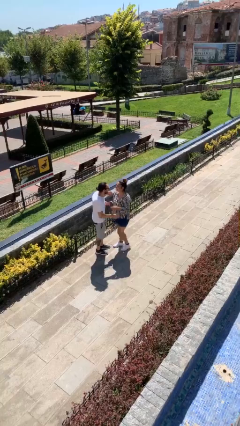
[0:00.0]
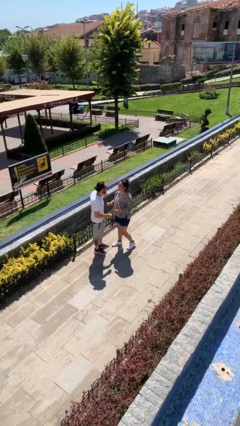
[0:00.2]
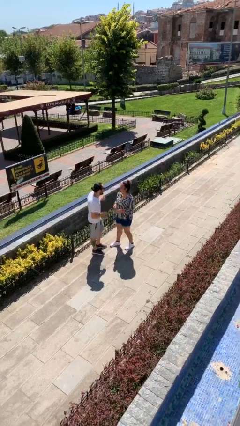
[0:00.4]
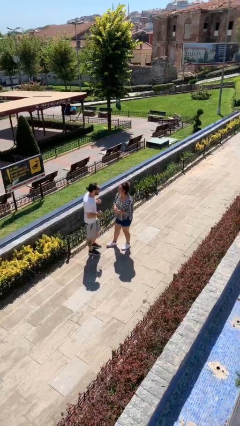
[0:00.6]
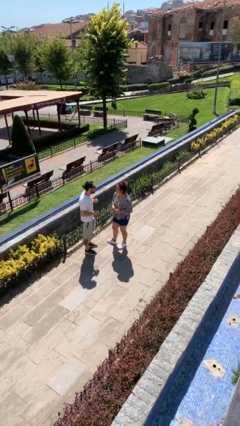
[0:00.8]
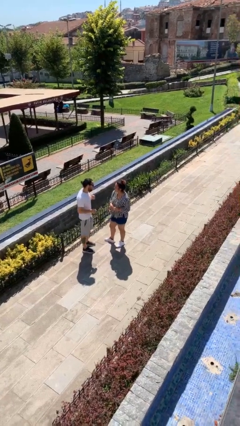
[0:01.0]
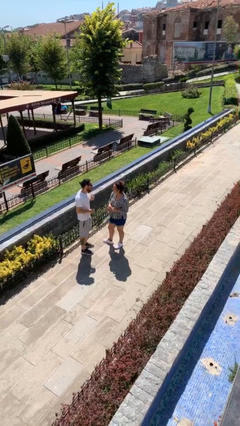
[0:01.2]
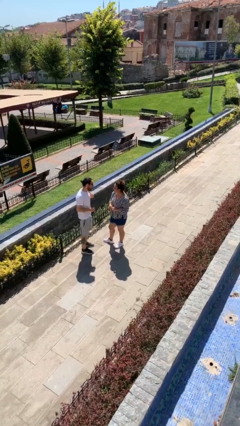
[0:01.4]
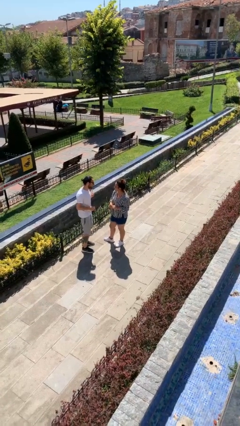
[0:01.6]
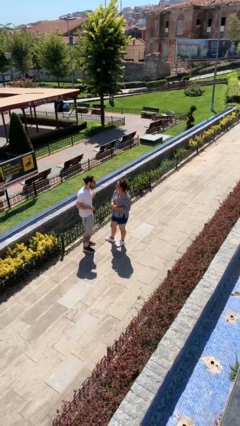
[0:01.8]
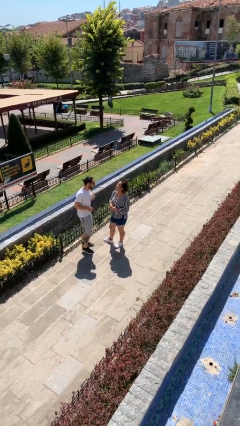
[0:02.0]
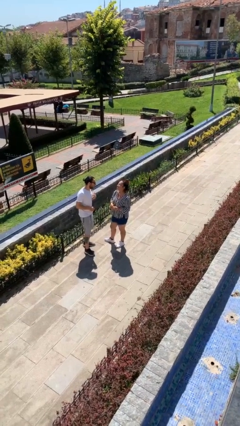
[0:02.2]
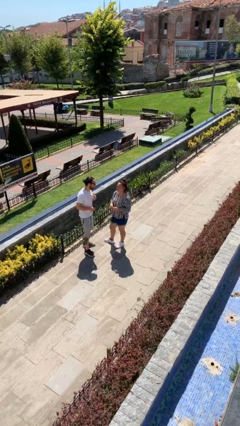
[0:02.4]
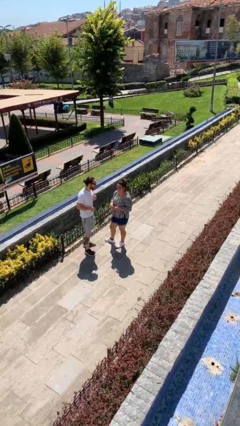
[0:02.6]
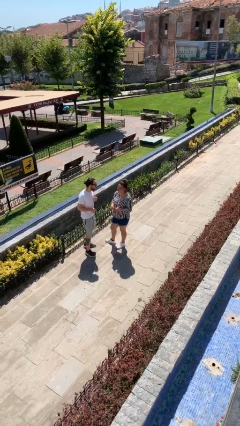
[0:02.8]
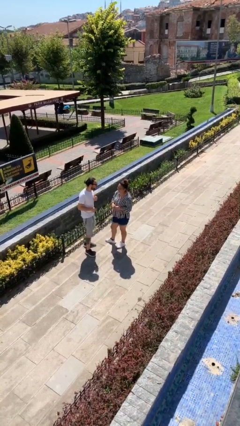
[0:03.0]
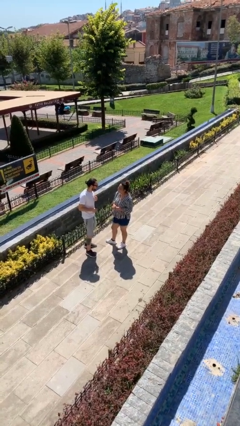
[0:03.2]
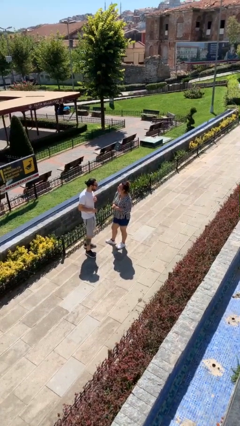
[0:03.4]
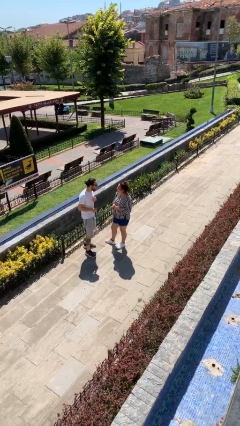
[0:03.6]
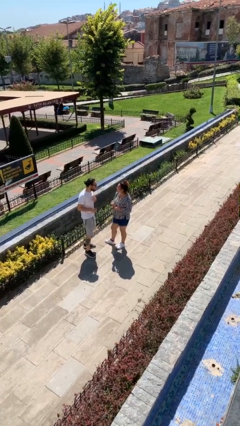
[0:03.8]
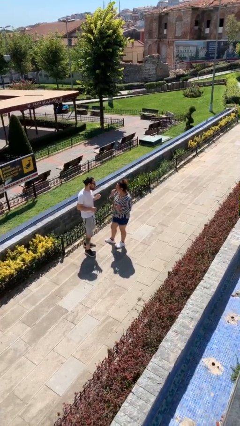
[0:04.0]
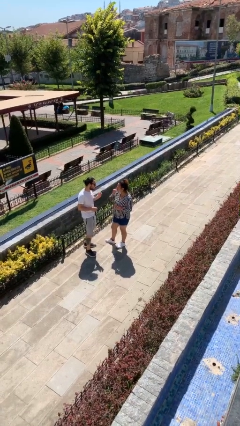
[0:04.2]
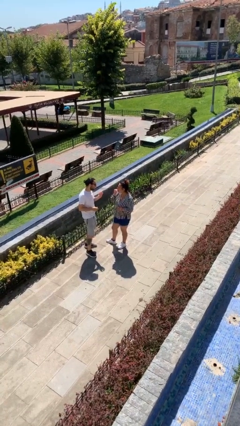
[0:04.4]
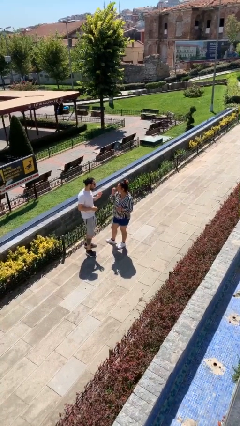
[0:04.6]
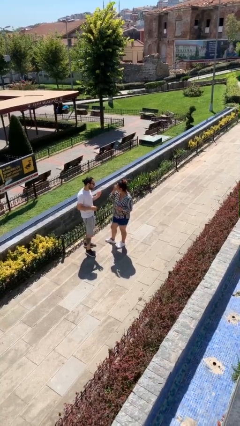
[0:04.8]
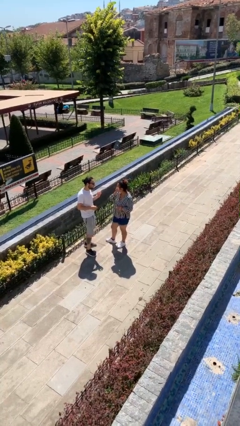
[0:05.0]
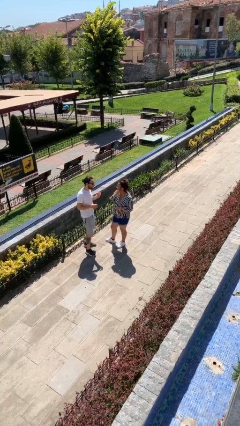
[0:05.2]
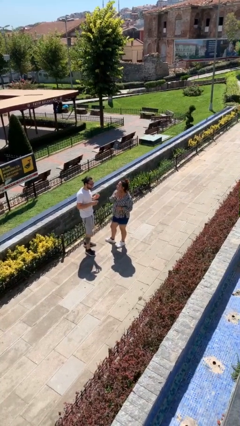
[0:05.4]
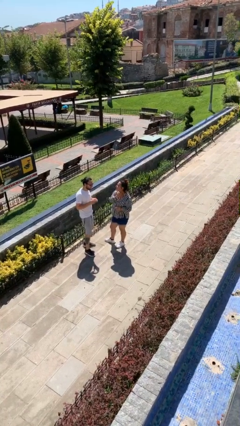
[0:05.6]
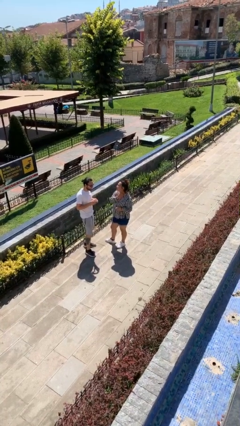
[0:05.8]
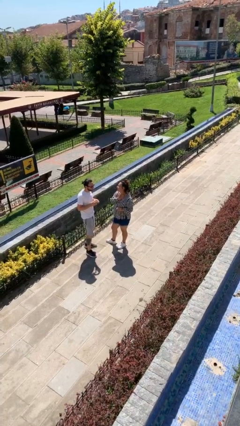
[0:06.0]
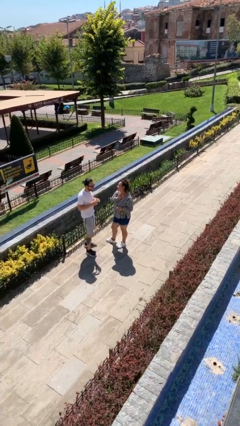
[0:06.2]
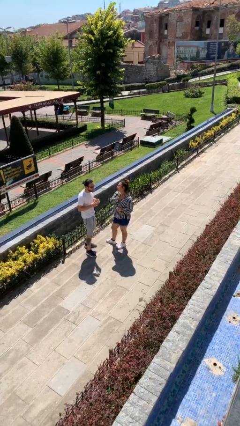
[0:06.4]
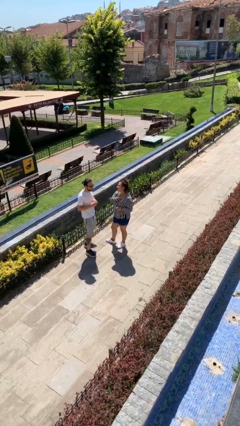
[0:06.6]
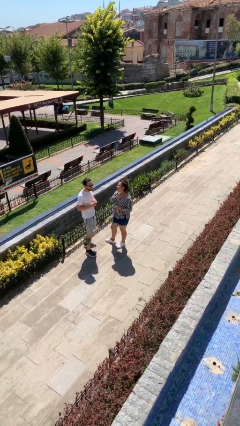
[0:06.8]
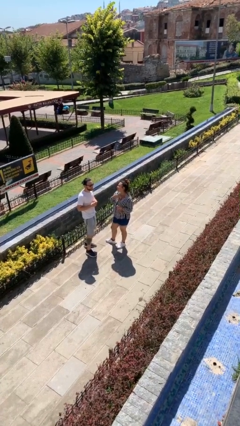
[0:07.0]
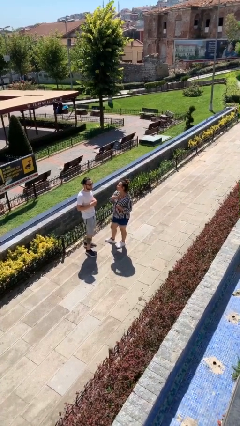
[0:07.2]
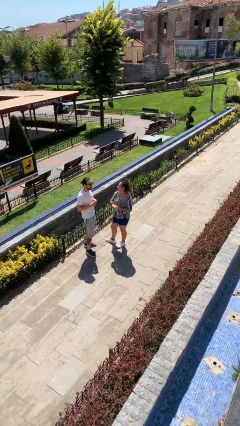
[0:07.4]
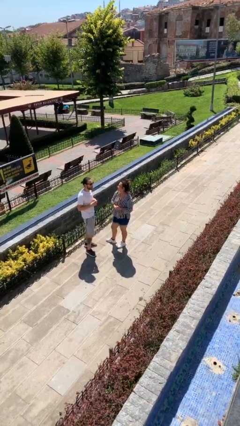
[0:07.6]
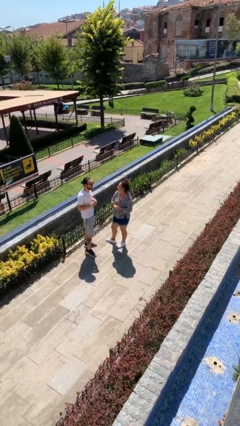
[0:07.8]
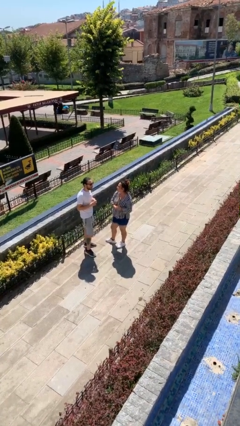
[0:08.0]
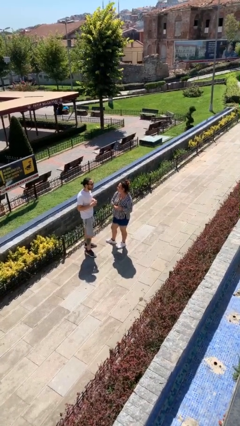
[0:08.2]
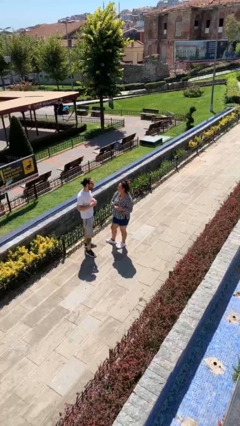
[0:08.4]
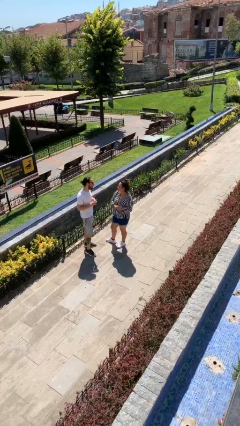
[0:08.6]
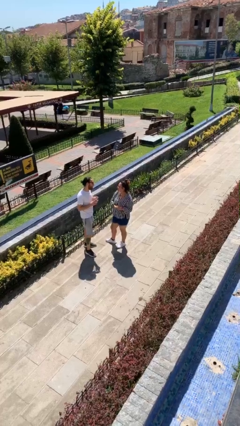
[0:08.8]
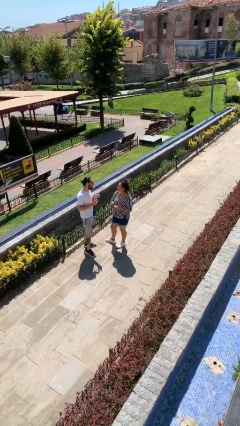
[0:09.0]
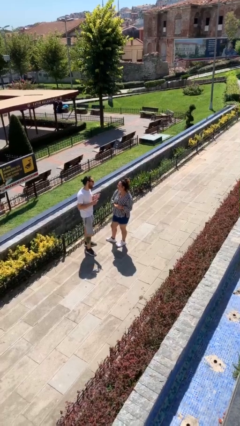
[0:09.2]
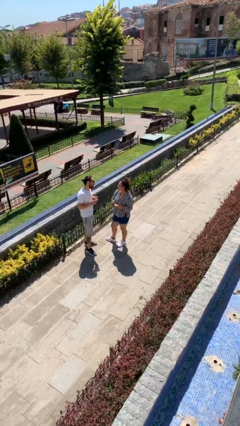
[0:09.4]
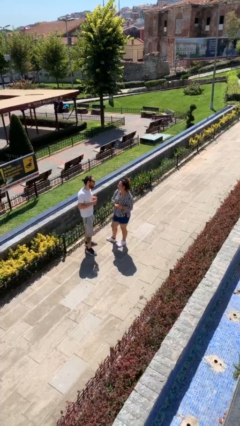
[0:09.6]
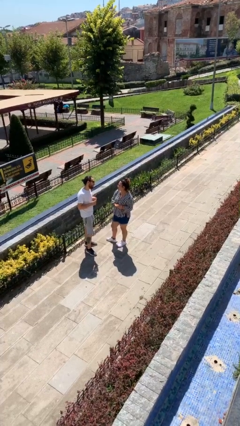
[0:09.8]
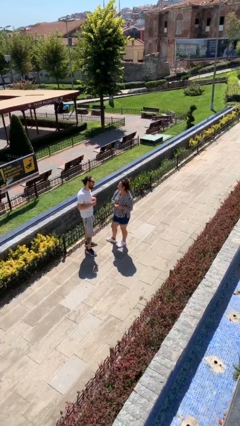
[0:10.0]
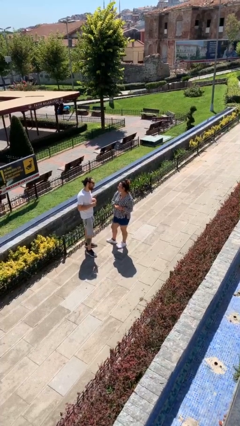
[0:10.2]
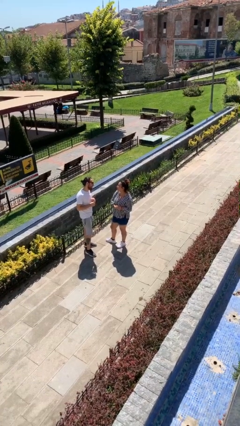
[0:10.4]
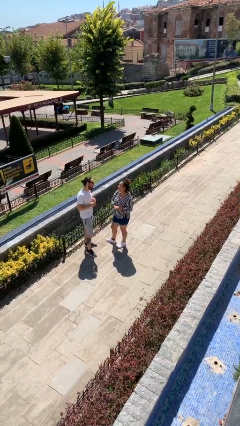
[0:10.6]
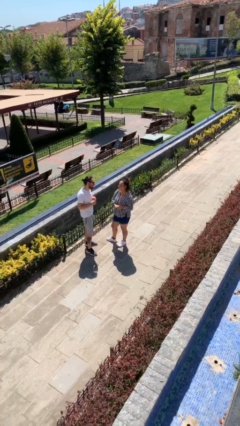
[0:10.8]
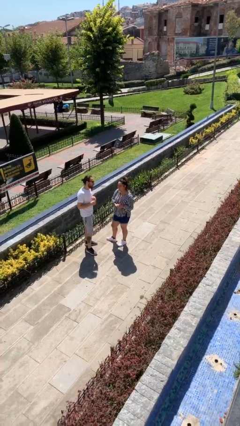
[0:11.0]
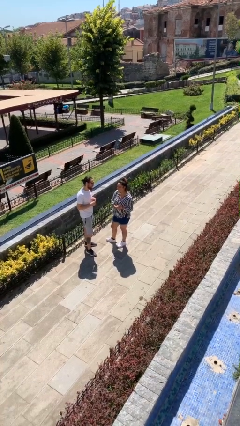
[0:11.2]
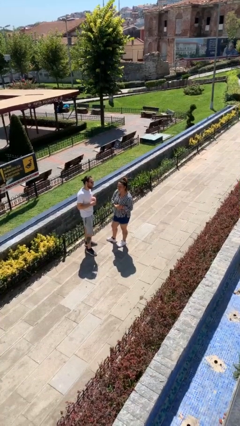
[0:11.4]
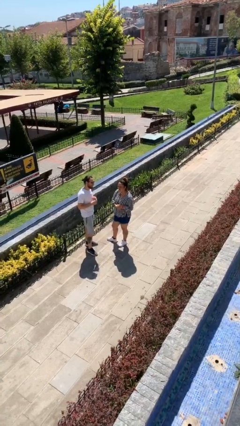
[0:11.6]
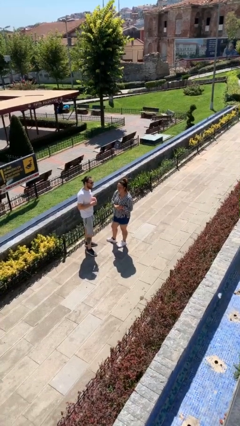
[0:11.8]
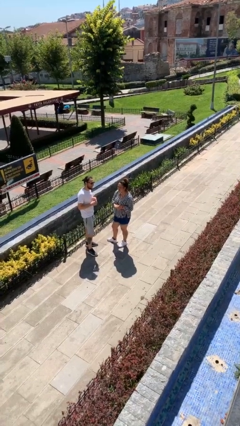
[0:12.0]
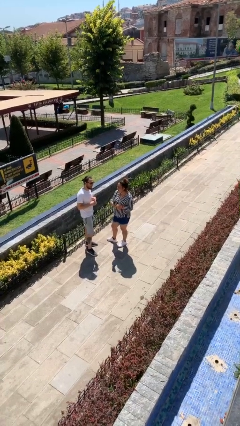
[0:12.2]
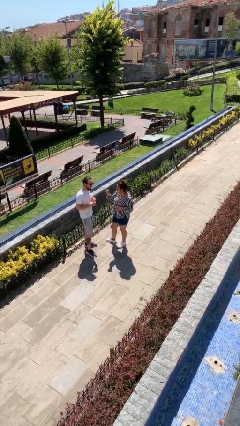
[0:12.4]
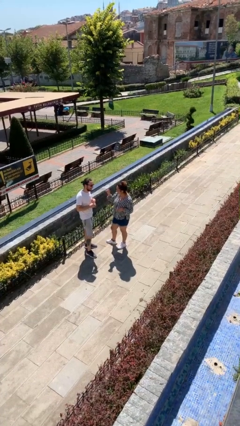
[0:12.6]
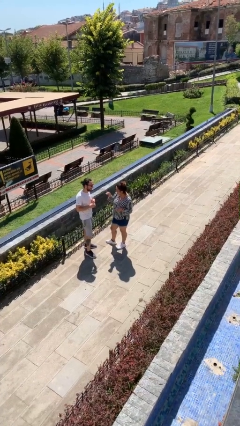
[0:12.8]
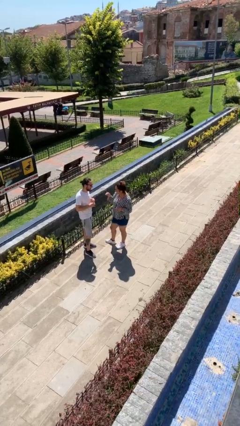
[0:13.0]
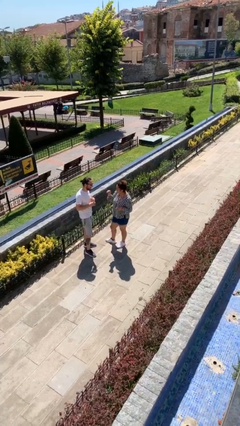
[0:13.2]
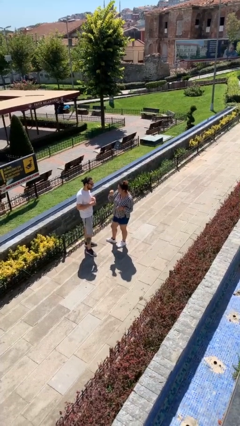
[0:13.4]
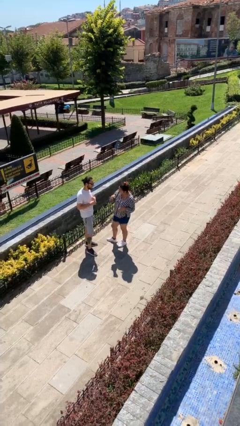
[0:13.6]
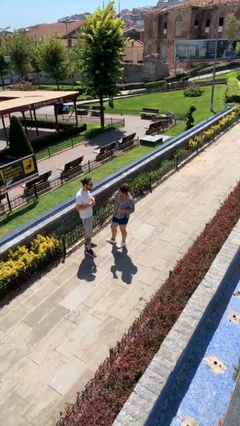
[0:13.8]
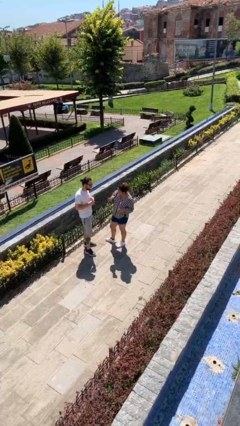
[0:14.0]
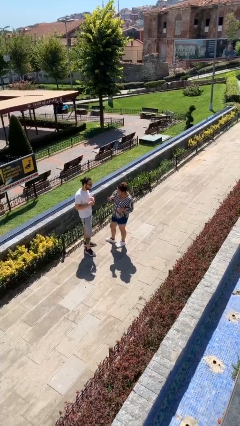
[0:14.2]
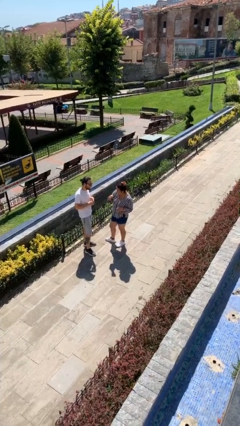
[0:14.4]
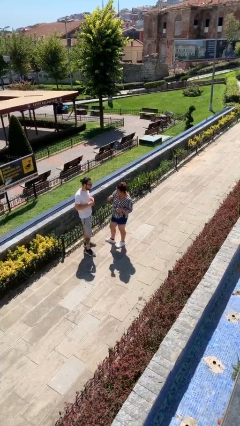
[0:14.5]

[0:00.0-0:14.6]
person talks to person

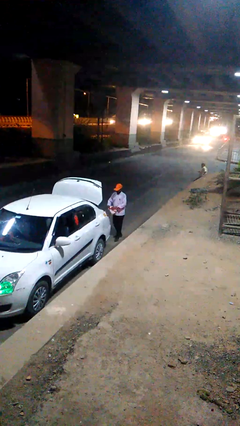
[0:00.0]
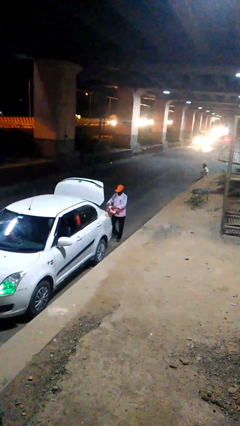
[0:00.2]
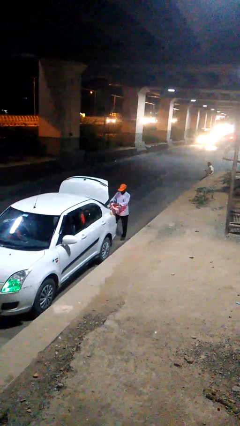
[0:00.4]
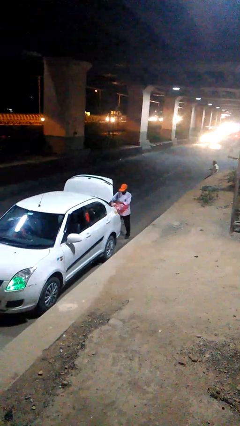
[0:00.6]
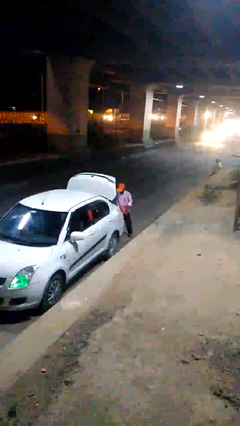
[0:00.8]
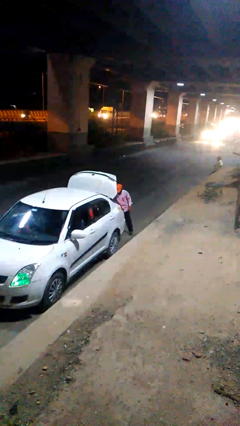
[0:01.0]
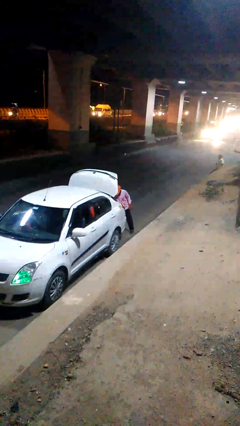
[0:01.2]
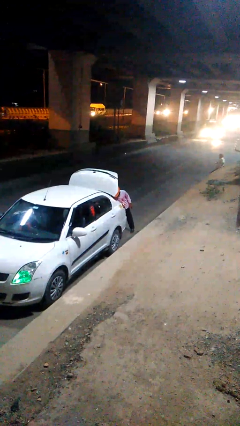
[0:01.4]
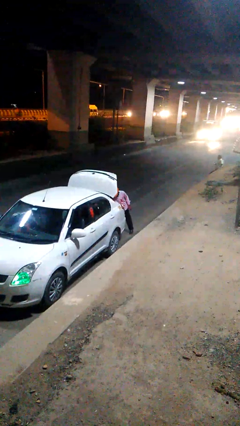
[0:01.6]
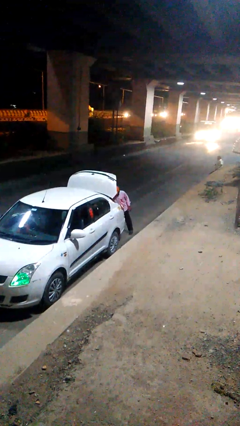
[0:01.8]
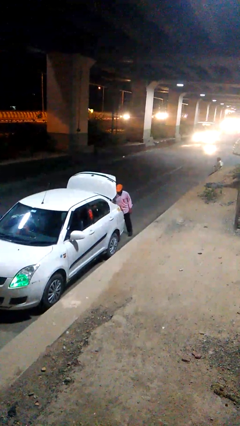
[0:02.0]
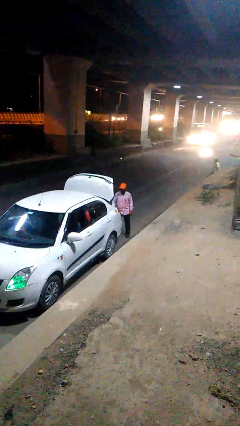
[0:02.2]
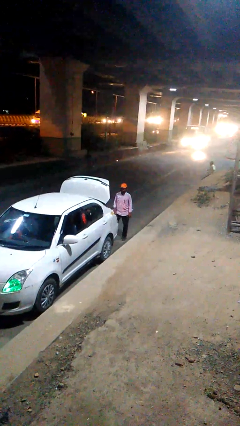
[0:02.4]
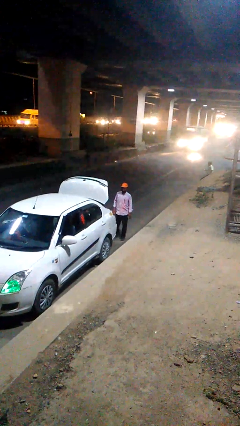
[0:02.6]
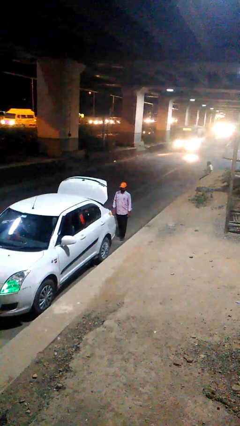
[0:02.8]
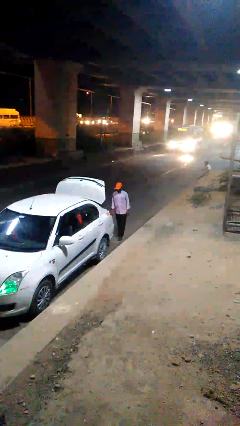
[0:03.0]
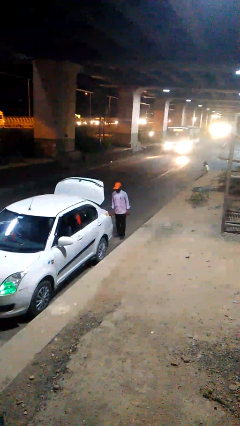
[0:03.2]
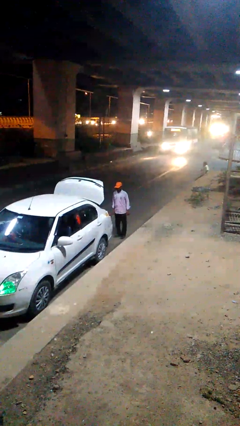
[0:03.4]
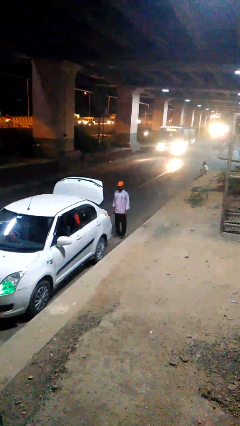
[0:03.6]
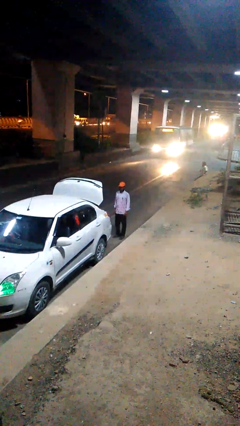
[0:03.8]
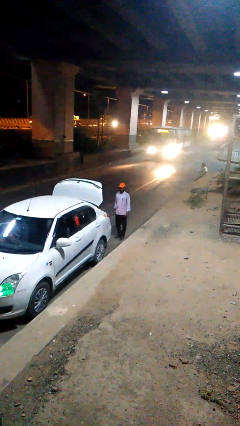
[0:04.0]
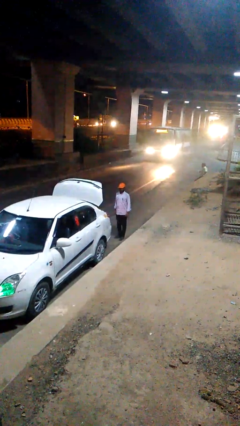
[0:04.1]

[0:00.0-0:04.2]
person loads car
